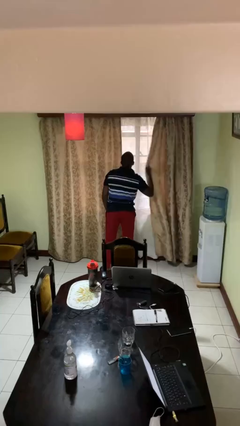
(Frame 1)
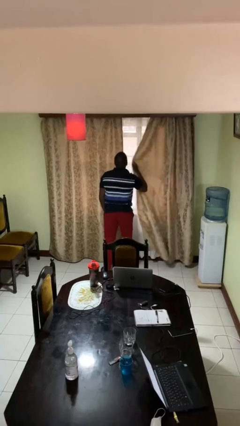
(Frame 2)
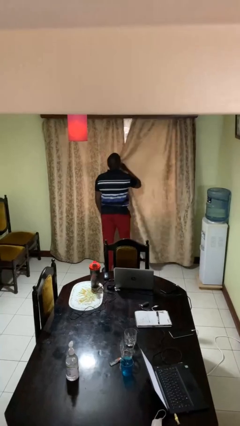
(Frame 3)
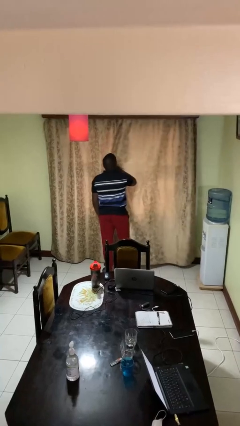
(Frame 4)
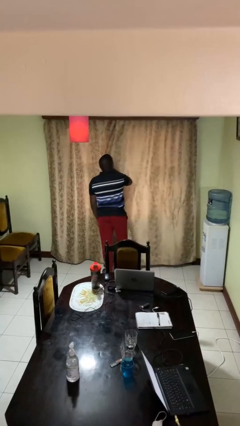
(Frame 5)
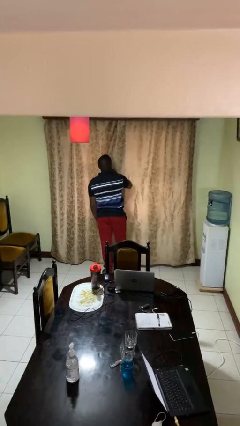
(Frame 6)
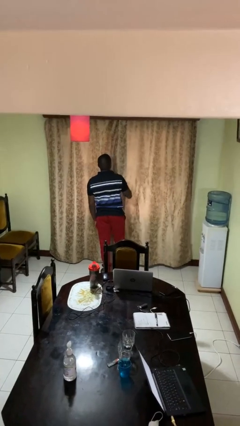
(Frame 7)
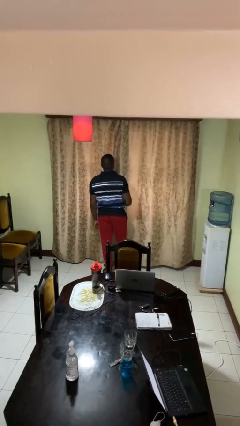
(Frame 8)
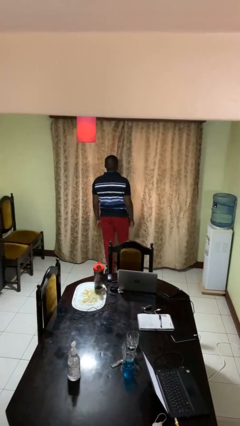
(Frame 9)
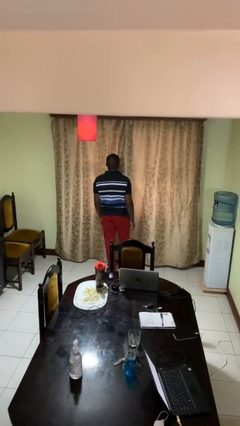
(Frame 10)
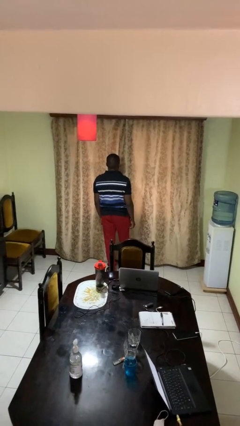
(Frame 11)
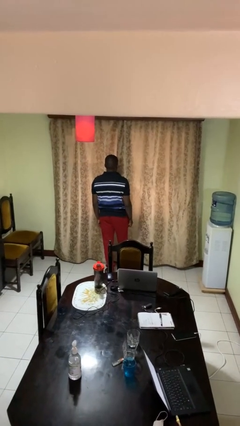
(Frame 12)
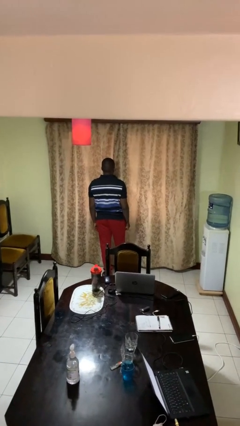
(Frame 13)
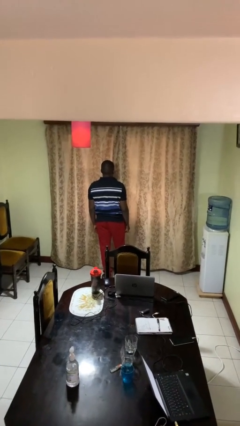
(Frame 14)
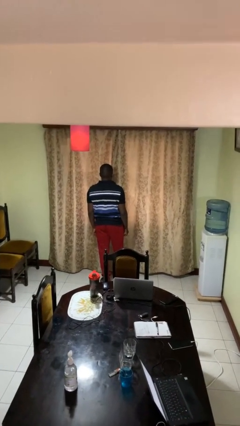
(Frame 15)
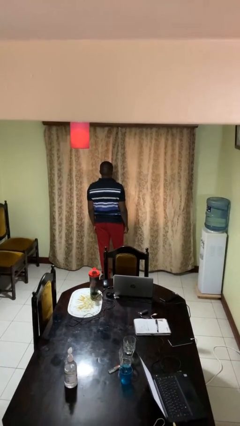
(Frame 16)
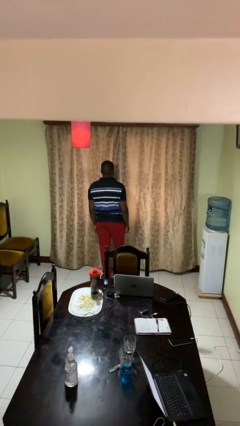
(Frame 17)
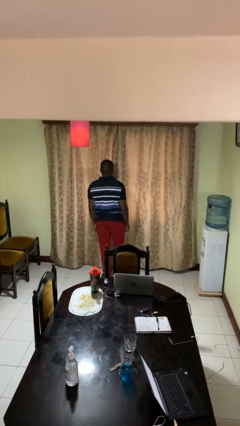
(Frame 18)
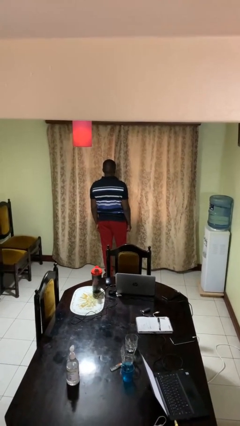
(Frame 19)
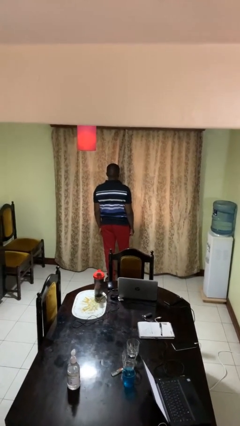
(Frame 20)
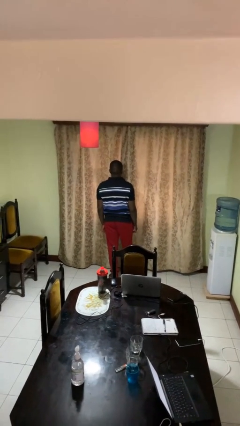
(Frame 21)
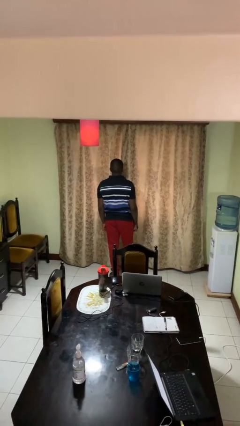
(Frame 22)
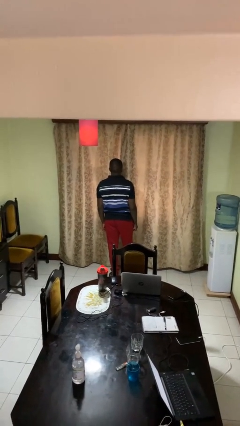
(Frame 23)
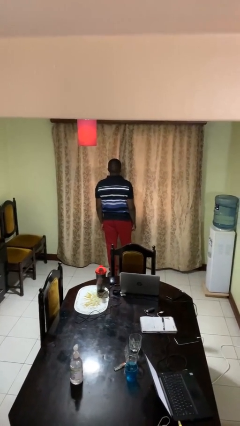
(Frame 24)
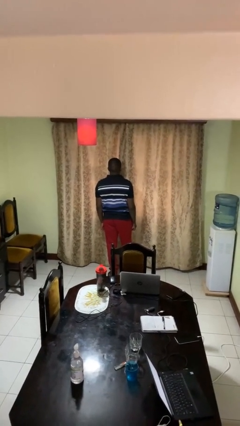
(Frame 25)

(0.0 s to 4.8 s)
person closes curtains

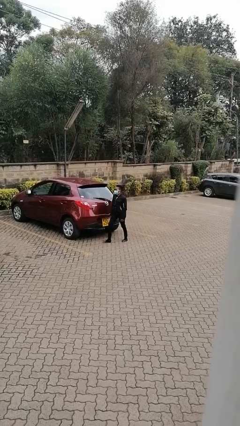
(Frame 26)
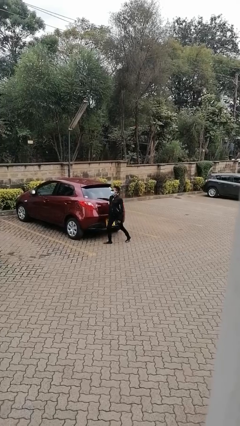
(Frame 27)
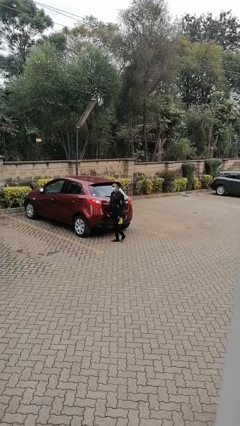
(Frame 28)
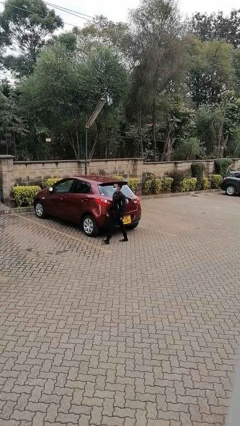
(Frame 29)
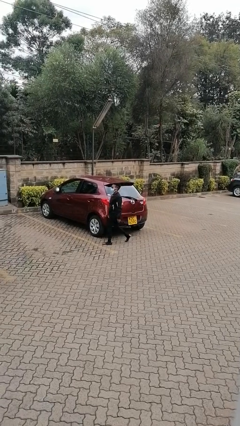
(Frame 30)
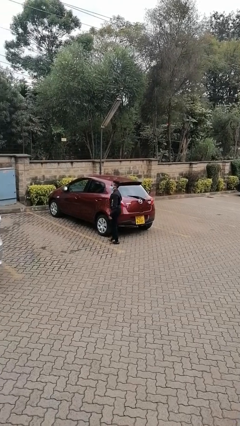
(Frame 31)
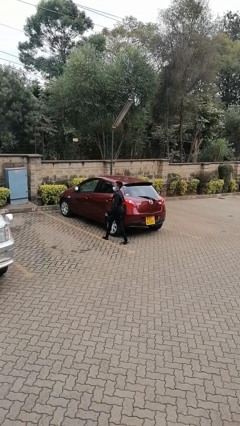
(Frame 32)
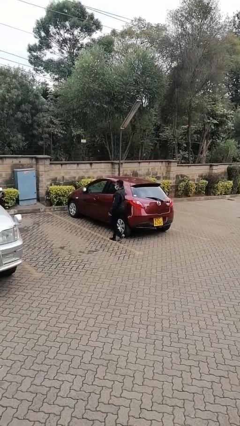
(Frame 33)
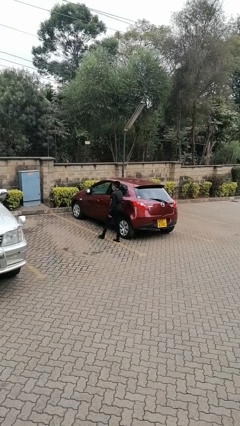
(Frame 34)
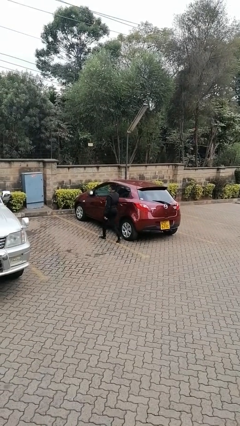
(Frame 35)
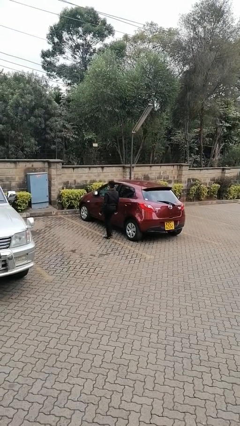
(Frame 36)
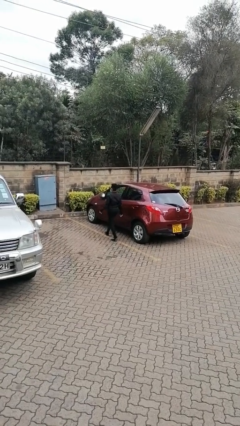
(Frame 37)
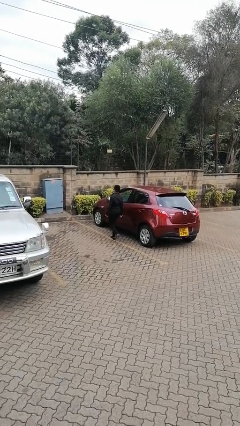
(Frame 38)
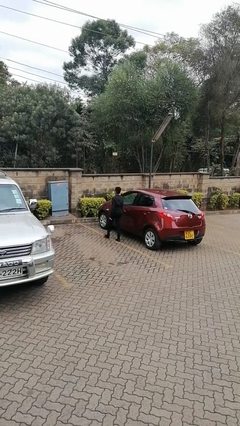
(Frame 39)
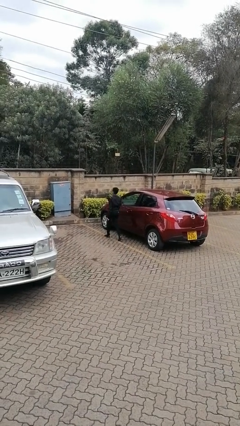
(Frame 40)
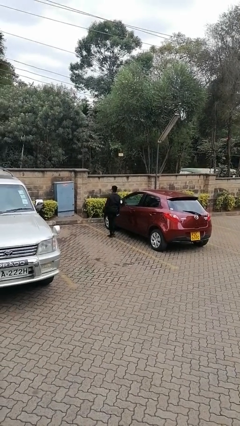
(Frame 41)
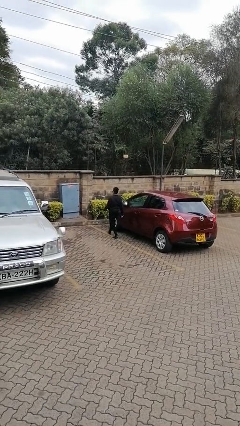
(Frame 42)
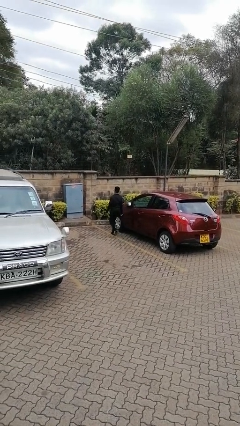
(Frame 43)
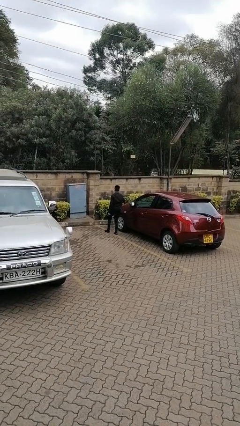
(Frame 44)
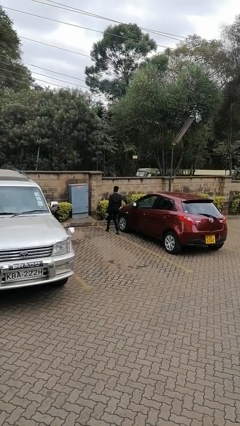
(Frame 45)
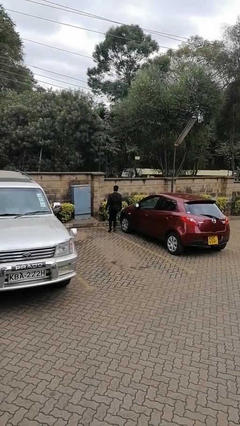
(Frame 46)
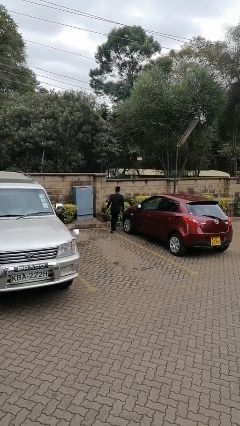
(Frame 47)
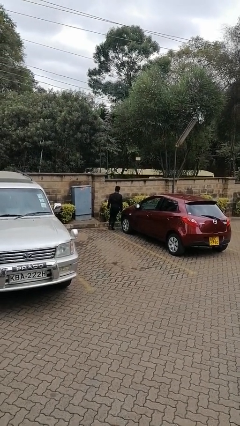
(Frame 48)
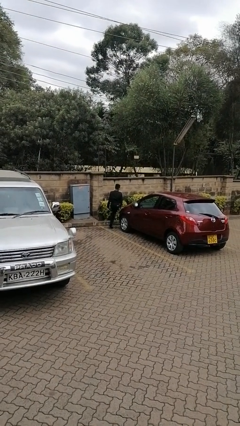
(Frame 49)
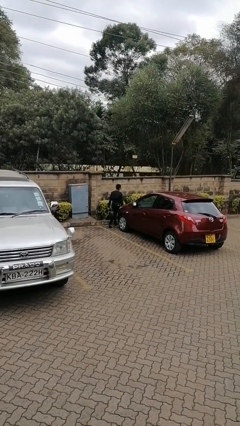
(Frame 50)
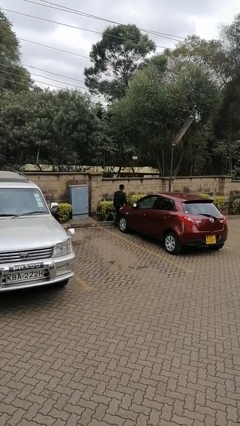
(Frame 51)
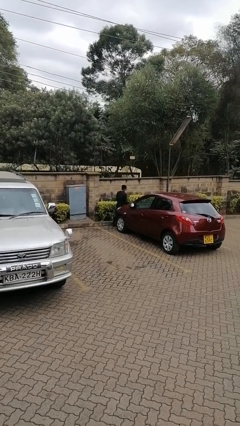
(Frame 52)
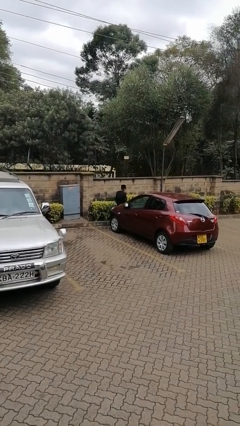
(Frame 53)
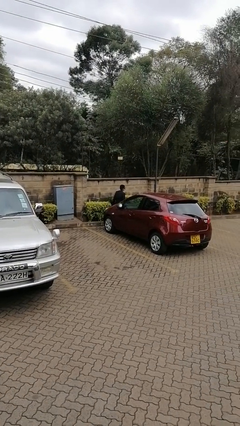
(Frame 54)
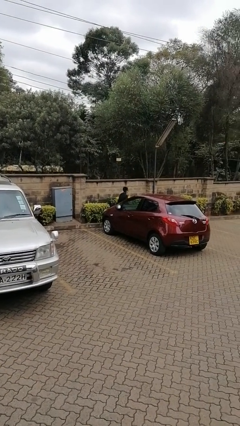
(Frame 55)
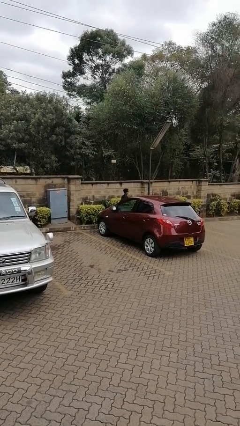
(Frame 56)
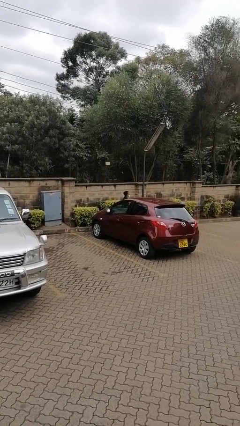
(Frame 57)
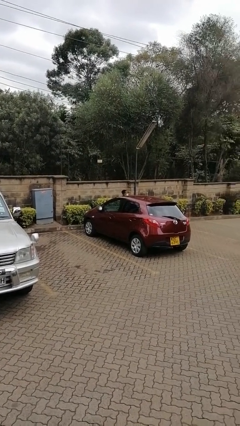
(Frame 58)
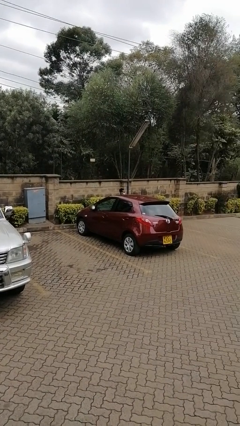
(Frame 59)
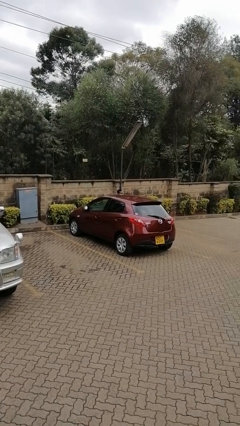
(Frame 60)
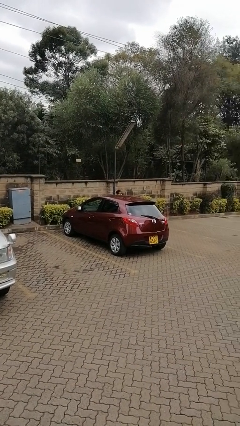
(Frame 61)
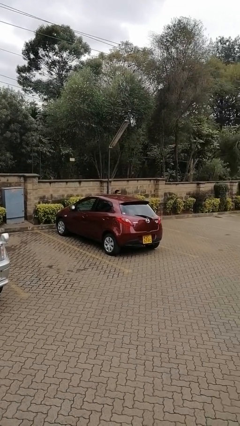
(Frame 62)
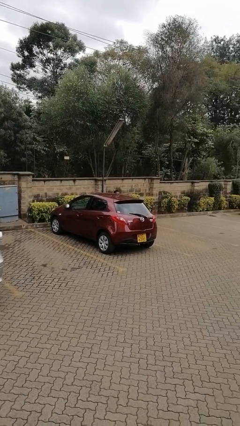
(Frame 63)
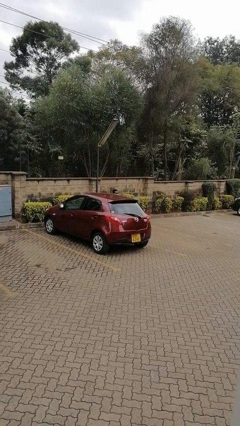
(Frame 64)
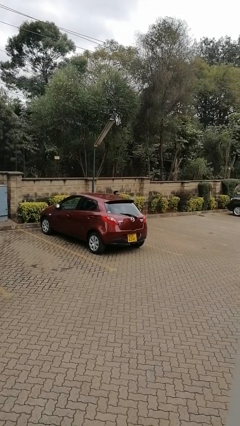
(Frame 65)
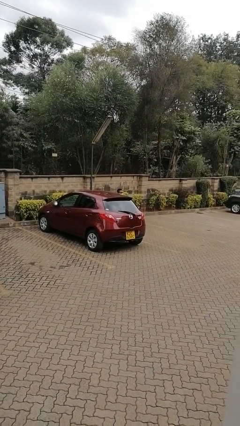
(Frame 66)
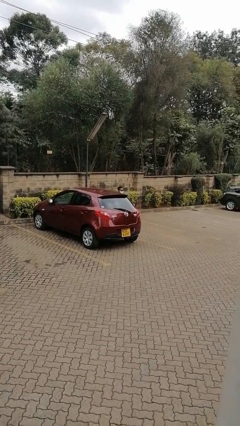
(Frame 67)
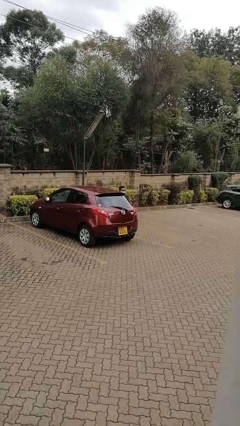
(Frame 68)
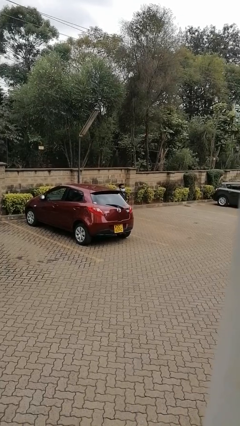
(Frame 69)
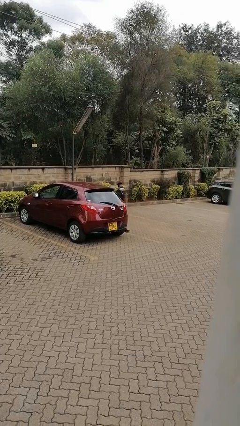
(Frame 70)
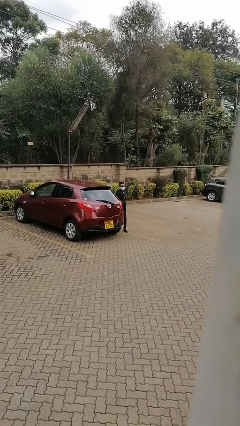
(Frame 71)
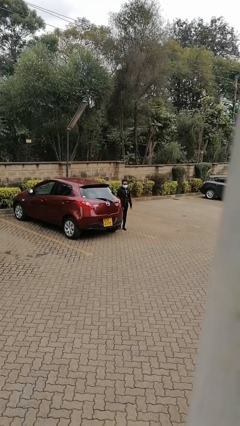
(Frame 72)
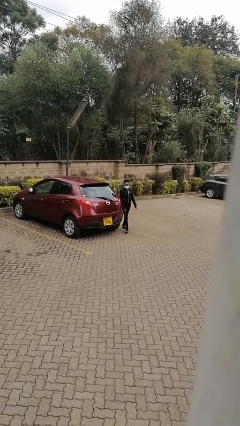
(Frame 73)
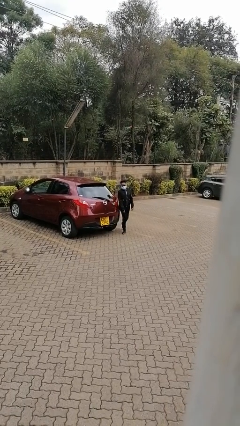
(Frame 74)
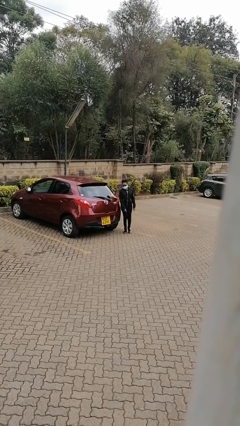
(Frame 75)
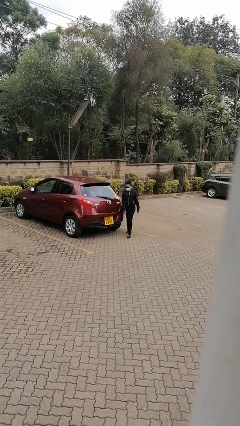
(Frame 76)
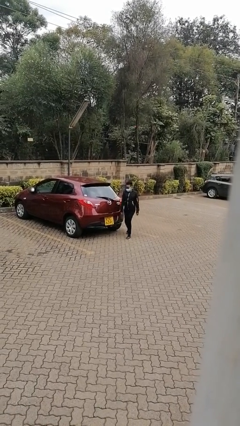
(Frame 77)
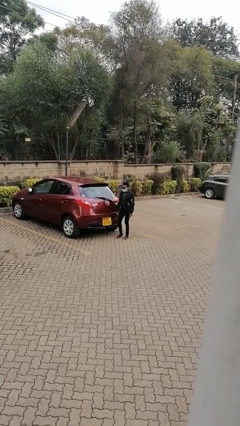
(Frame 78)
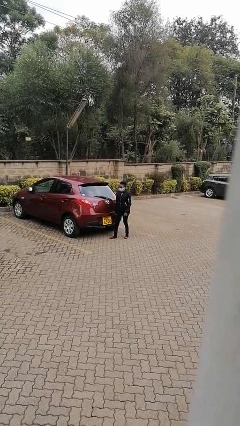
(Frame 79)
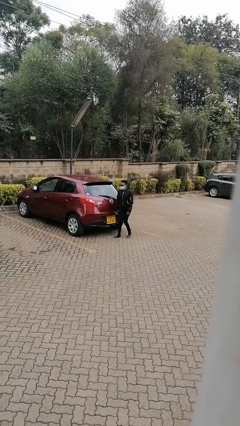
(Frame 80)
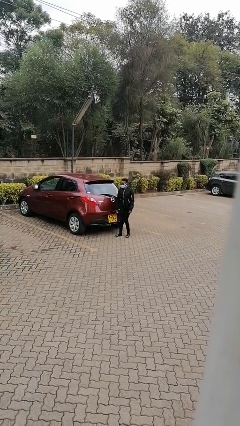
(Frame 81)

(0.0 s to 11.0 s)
person walks around car

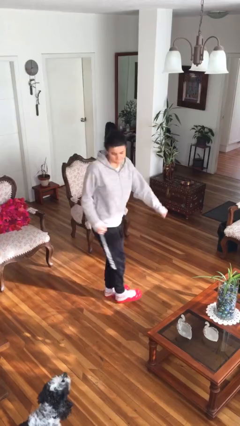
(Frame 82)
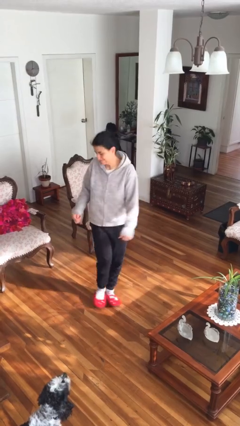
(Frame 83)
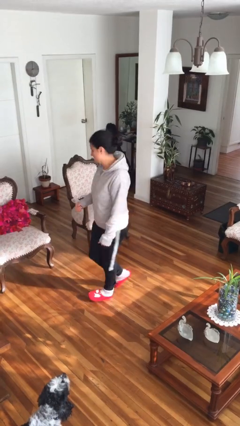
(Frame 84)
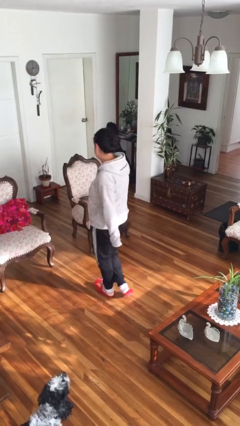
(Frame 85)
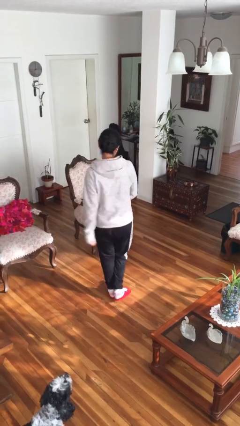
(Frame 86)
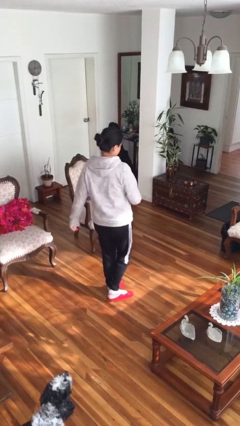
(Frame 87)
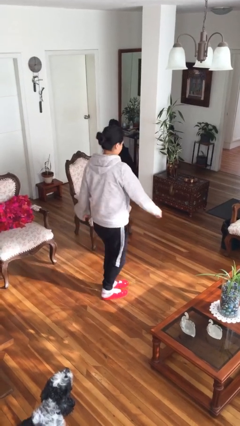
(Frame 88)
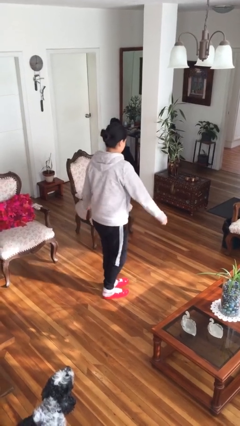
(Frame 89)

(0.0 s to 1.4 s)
person twirls

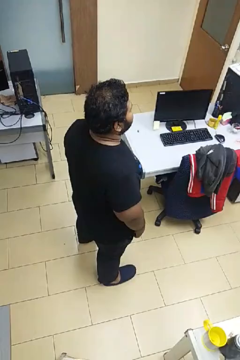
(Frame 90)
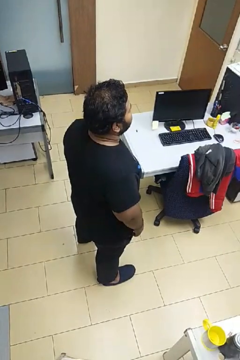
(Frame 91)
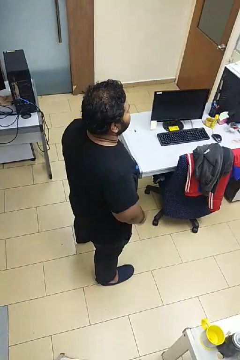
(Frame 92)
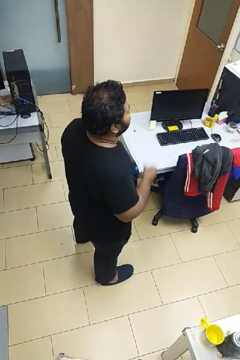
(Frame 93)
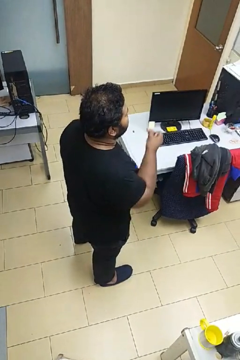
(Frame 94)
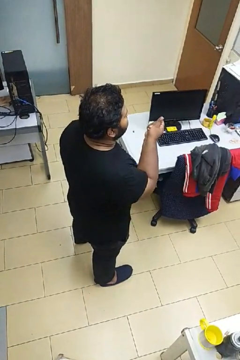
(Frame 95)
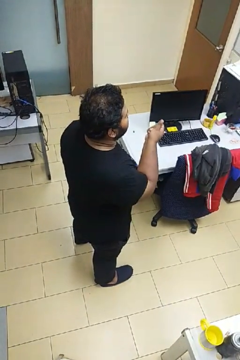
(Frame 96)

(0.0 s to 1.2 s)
person snaps fingers
